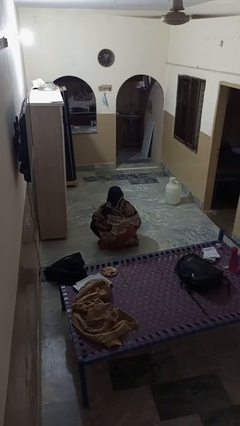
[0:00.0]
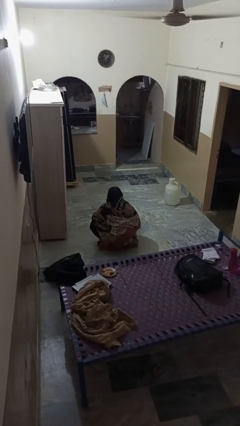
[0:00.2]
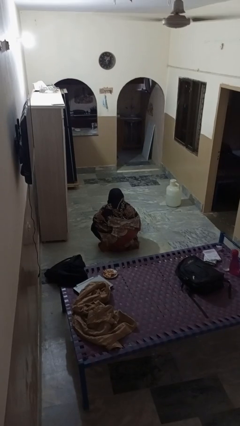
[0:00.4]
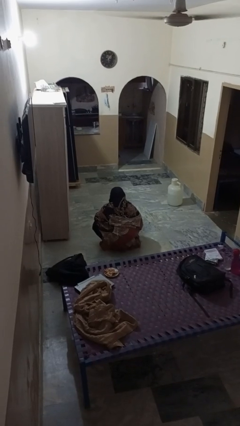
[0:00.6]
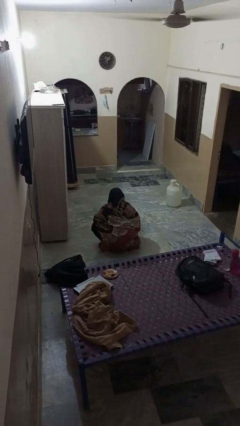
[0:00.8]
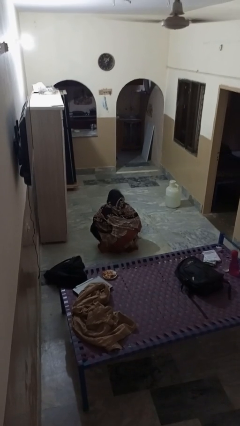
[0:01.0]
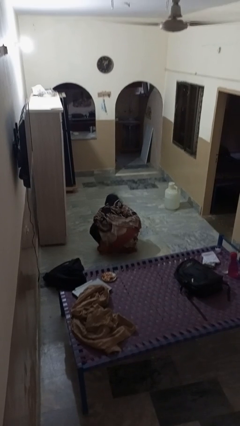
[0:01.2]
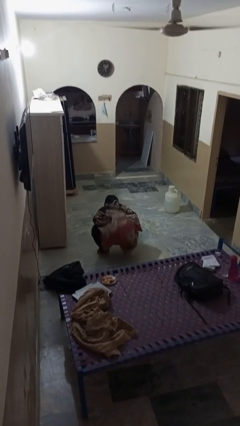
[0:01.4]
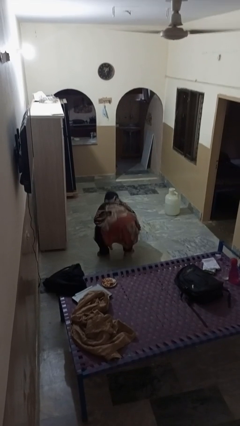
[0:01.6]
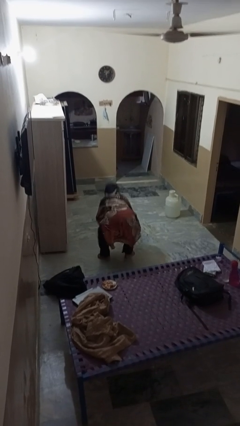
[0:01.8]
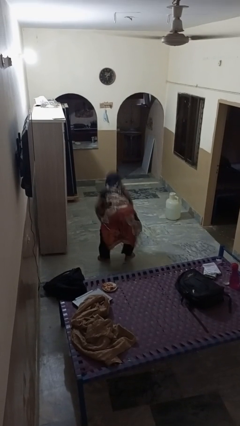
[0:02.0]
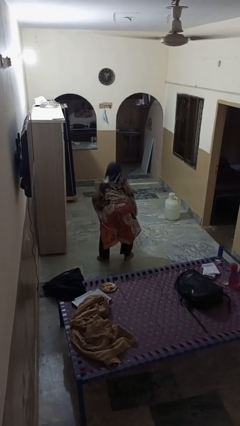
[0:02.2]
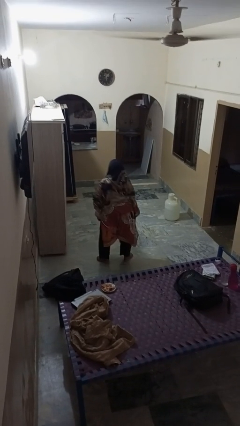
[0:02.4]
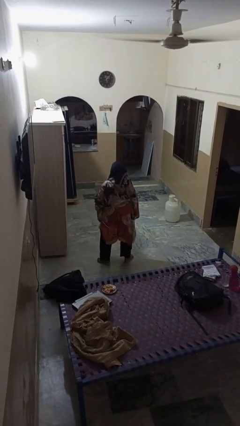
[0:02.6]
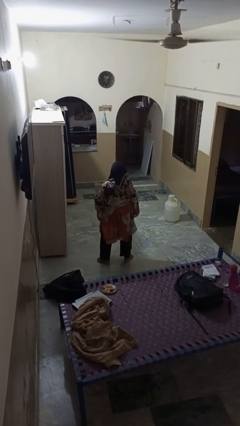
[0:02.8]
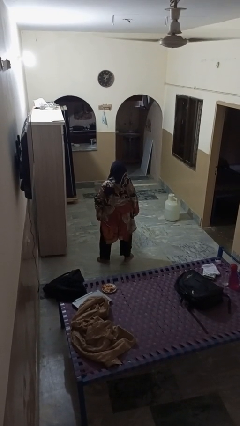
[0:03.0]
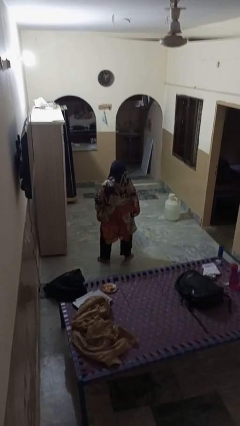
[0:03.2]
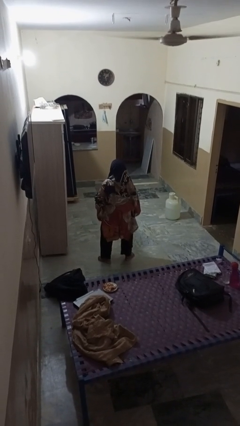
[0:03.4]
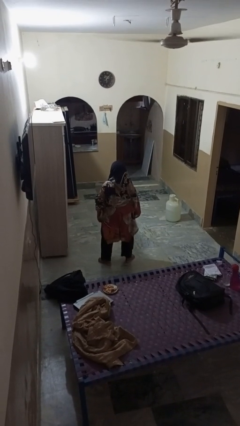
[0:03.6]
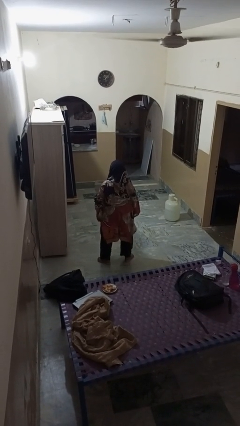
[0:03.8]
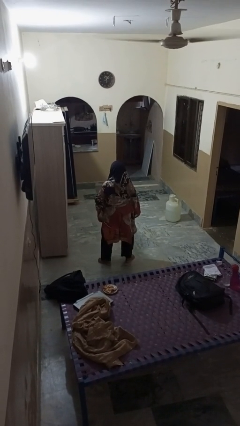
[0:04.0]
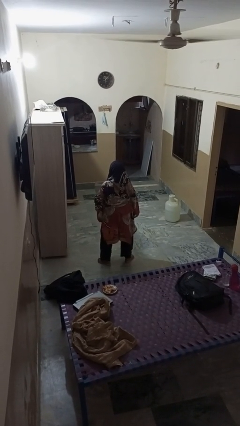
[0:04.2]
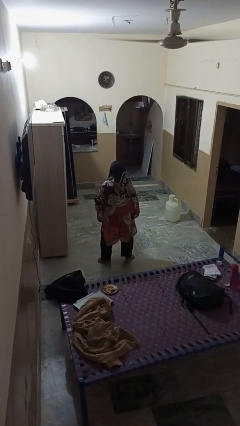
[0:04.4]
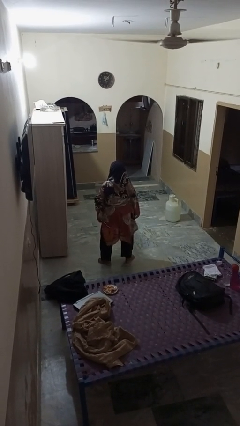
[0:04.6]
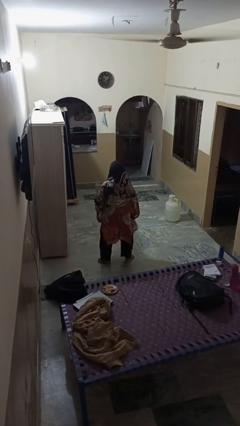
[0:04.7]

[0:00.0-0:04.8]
person stands up

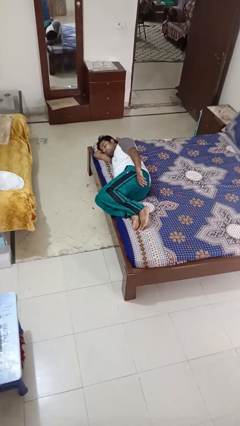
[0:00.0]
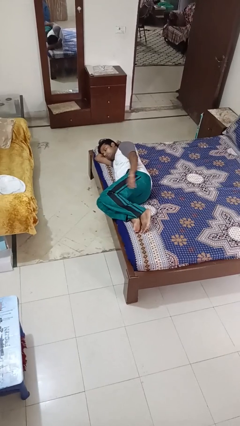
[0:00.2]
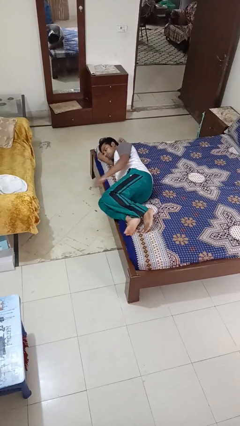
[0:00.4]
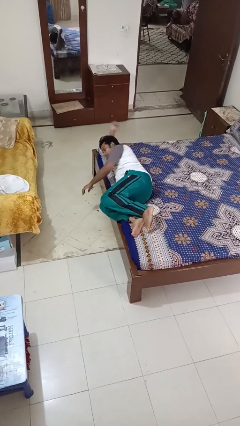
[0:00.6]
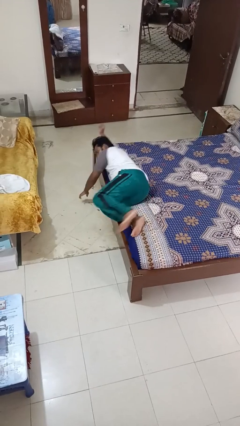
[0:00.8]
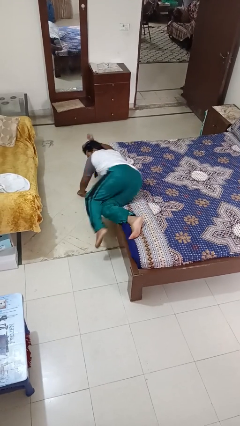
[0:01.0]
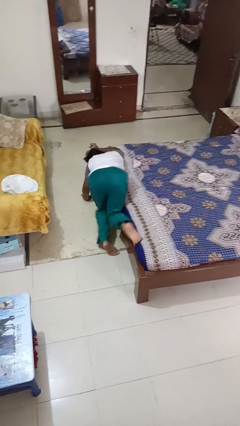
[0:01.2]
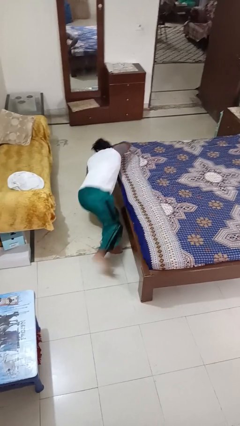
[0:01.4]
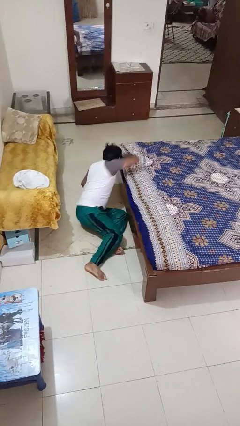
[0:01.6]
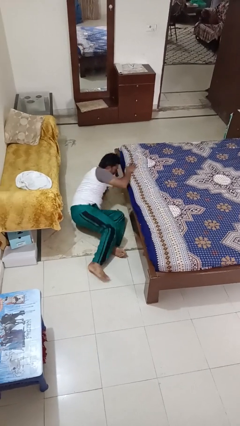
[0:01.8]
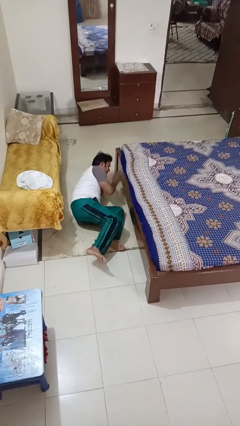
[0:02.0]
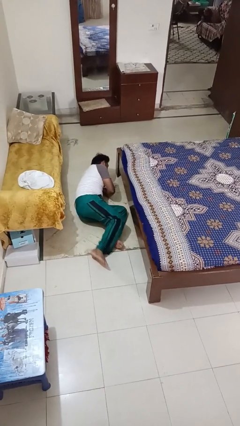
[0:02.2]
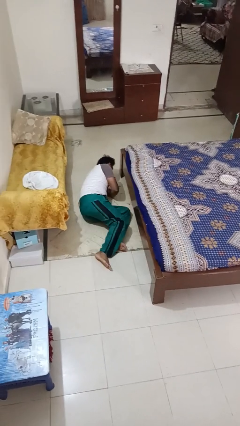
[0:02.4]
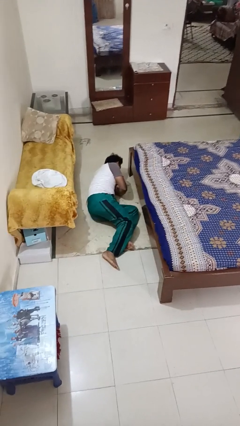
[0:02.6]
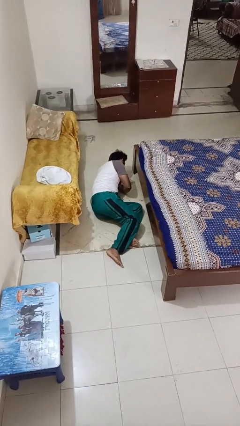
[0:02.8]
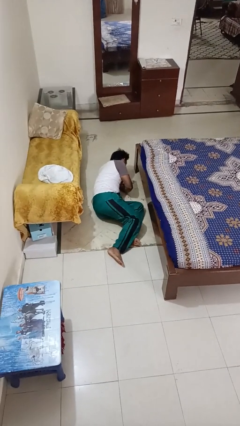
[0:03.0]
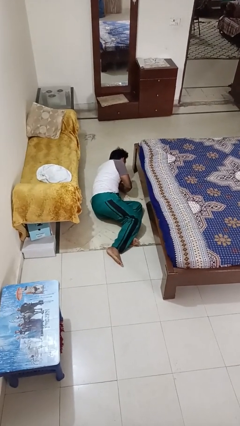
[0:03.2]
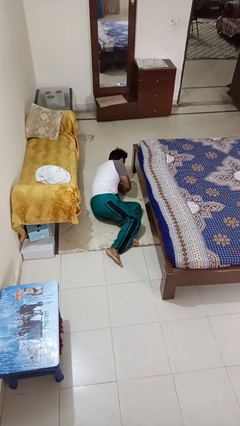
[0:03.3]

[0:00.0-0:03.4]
person falls from bed

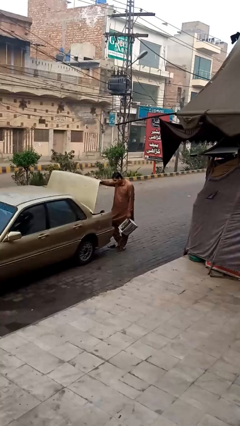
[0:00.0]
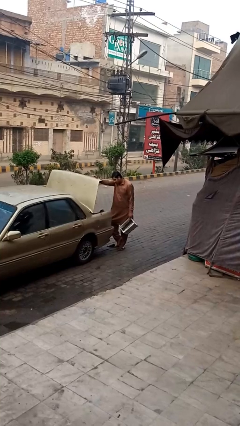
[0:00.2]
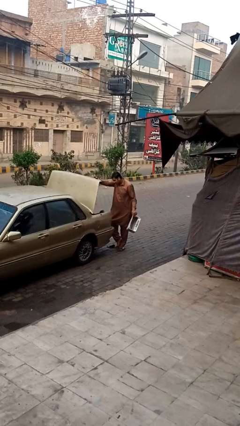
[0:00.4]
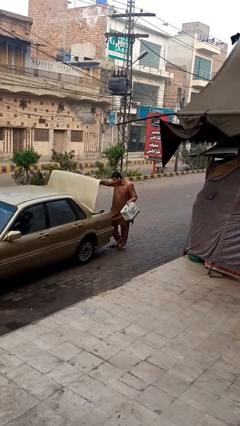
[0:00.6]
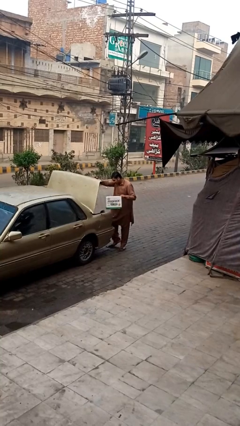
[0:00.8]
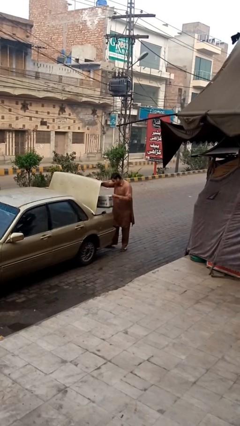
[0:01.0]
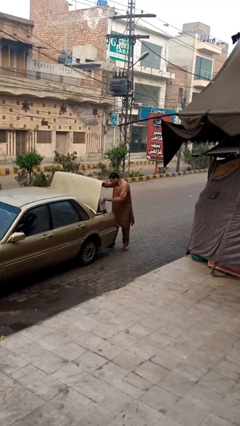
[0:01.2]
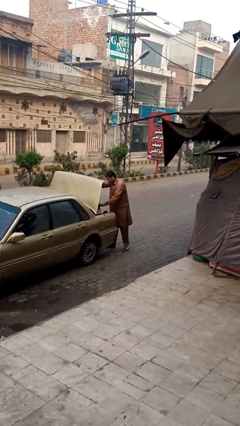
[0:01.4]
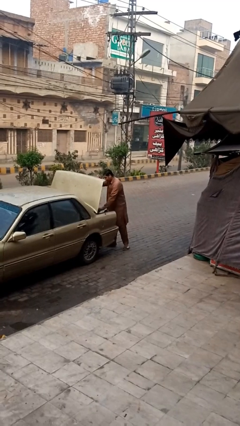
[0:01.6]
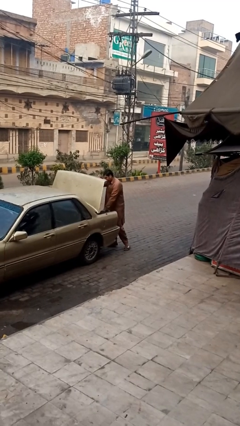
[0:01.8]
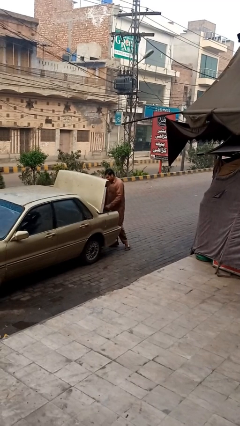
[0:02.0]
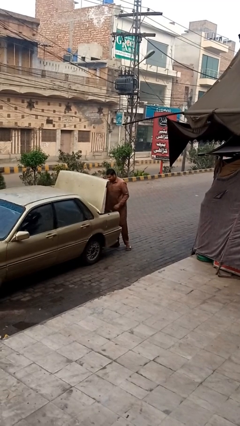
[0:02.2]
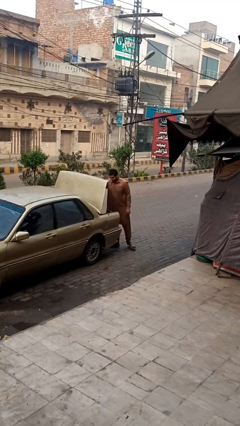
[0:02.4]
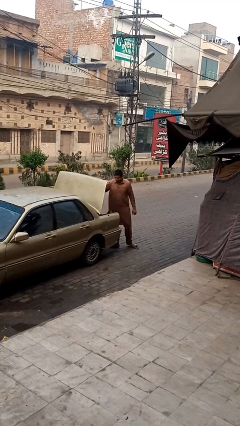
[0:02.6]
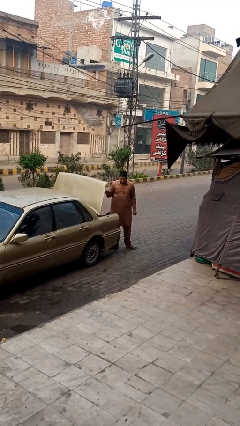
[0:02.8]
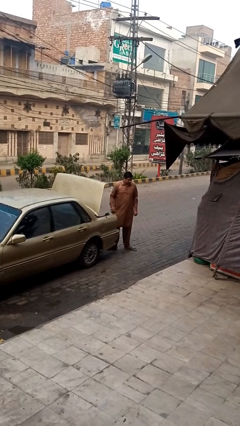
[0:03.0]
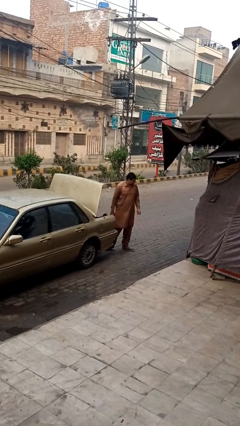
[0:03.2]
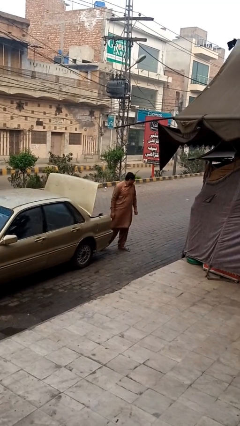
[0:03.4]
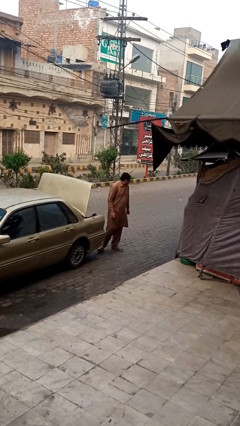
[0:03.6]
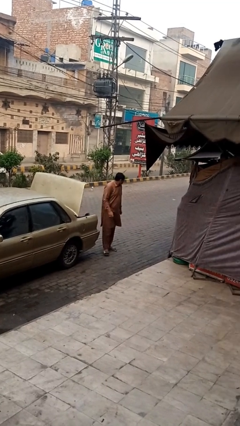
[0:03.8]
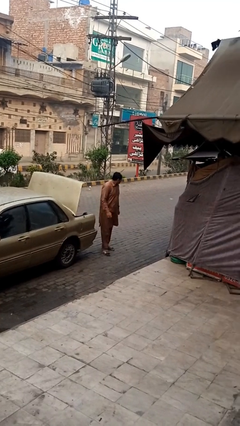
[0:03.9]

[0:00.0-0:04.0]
person loads car

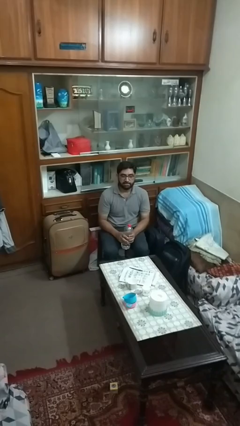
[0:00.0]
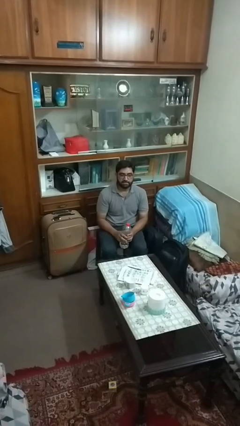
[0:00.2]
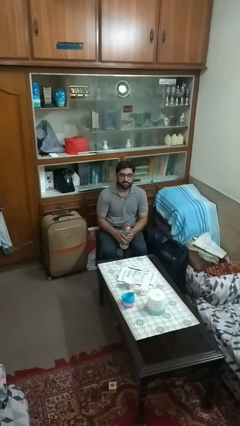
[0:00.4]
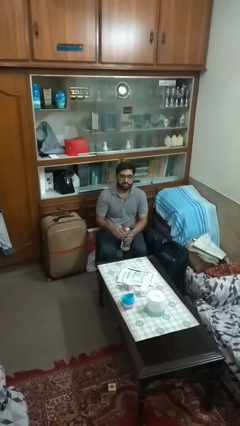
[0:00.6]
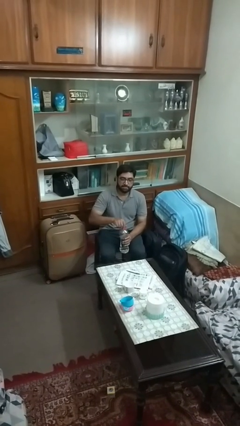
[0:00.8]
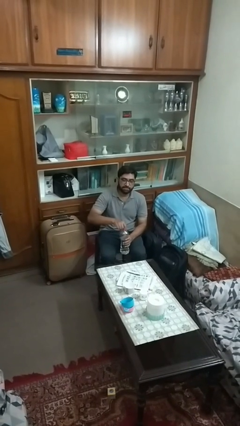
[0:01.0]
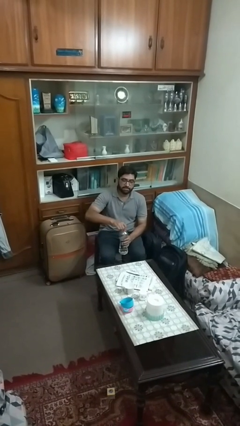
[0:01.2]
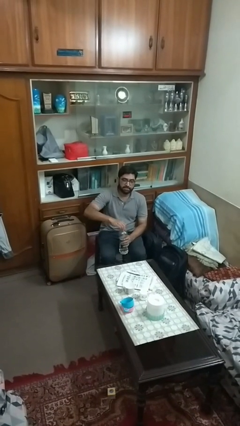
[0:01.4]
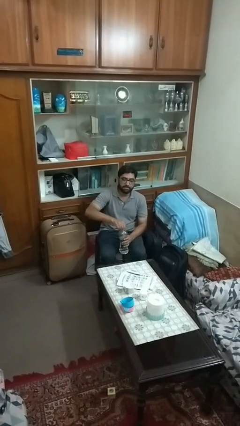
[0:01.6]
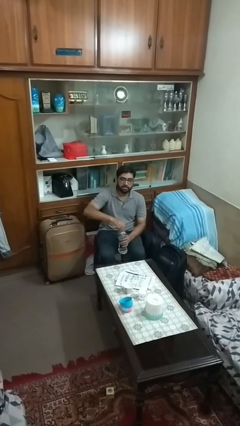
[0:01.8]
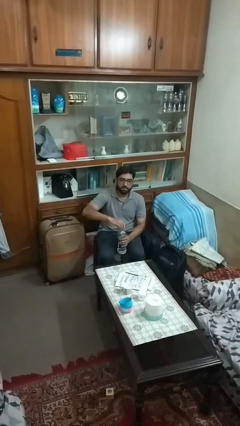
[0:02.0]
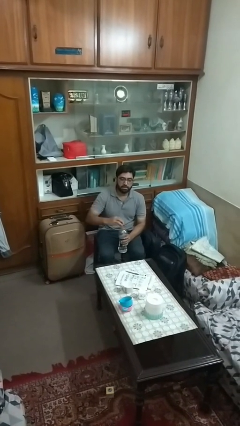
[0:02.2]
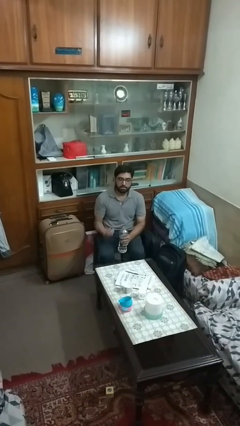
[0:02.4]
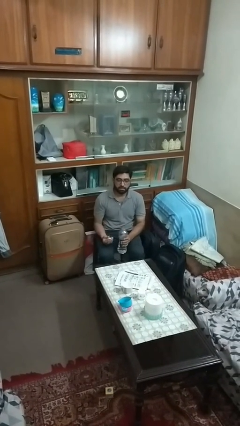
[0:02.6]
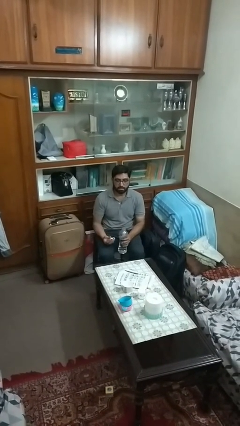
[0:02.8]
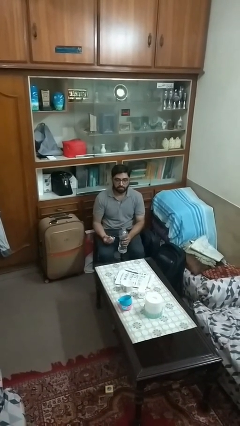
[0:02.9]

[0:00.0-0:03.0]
person unscrews lid from bottle

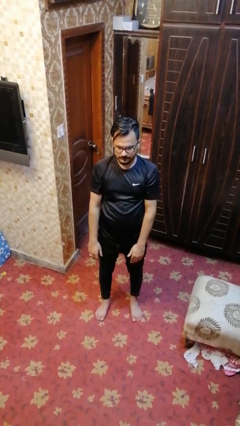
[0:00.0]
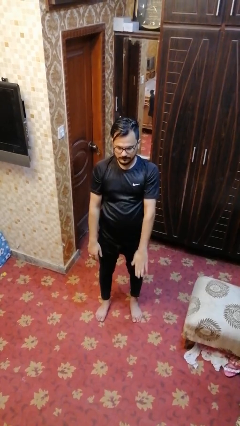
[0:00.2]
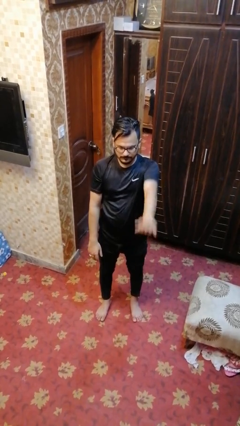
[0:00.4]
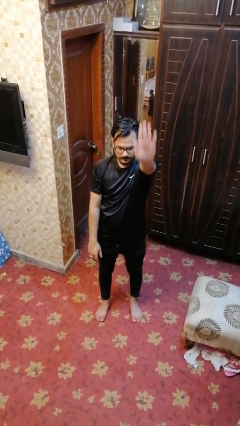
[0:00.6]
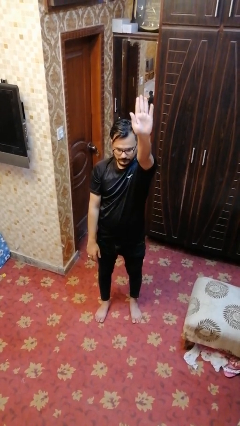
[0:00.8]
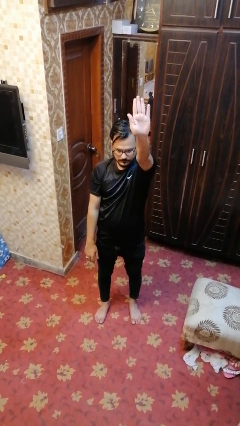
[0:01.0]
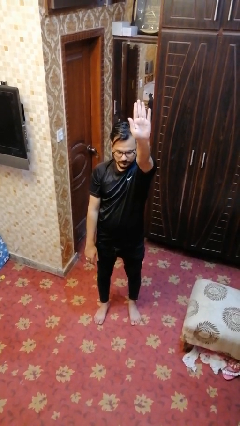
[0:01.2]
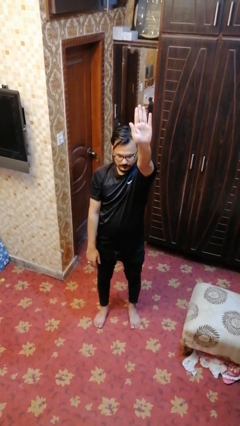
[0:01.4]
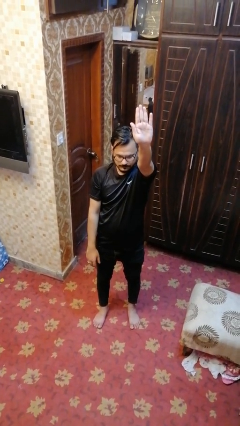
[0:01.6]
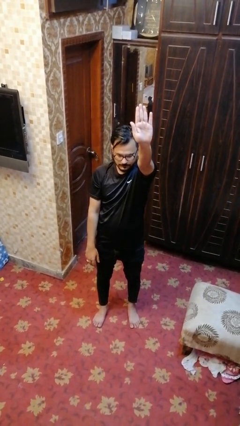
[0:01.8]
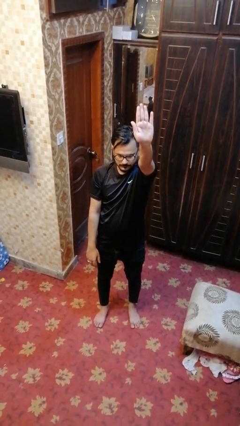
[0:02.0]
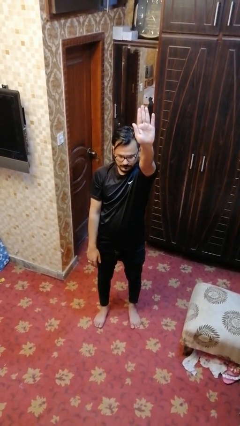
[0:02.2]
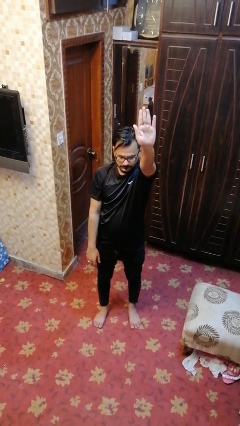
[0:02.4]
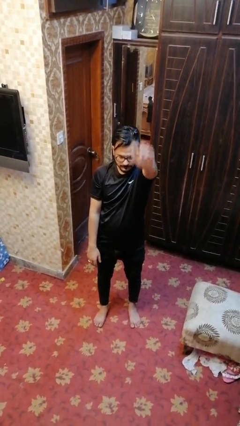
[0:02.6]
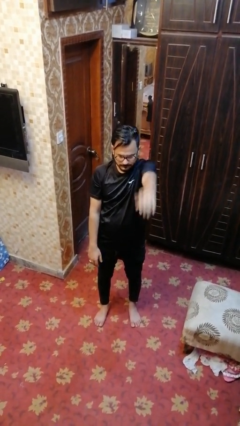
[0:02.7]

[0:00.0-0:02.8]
person gestures number five
